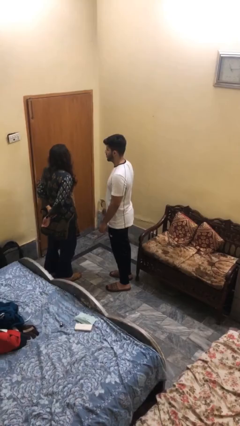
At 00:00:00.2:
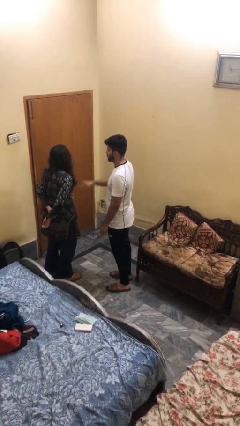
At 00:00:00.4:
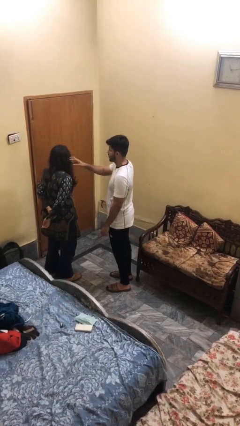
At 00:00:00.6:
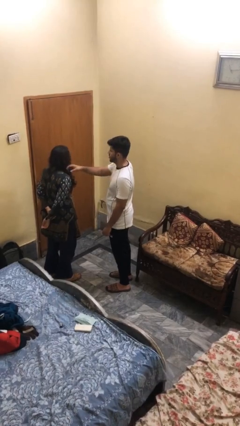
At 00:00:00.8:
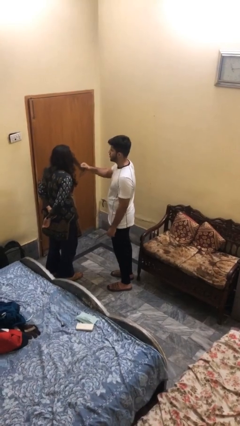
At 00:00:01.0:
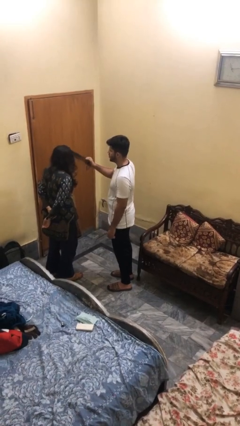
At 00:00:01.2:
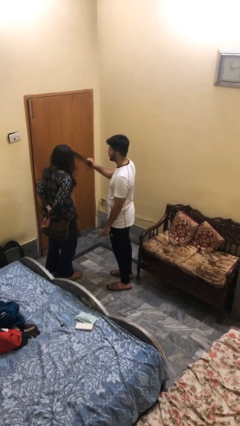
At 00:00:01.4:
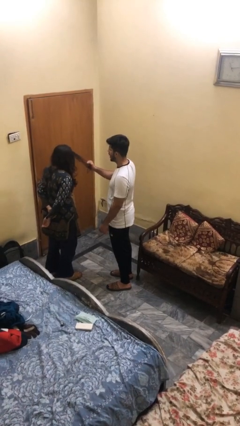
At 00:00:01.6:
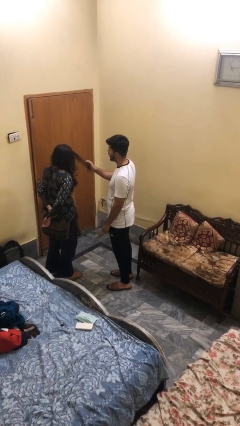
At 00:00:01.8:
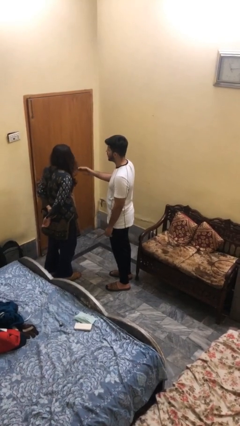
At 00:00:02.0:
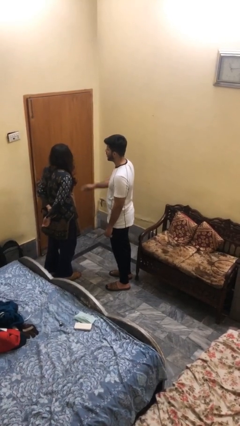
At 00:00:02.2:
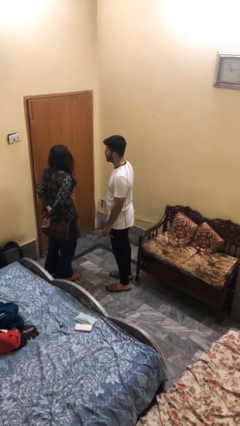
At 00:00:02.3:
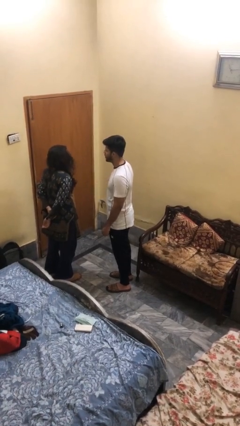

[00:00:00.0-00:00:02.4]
person grabs person by hair

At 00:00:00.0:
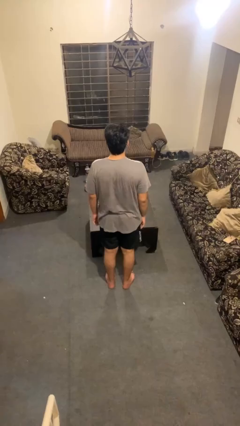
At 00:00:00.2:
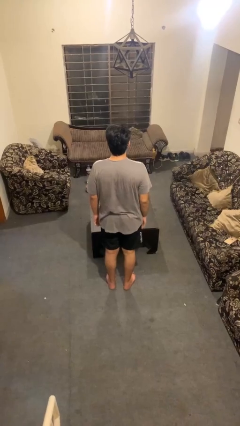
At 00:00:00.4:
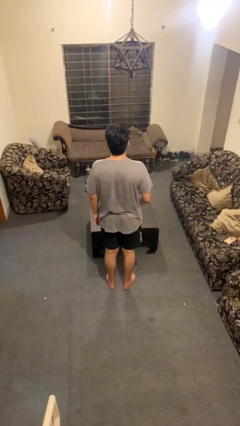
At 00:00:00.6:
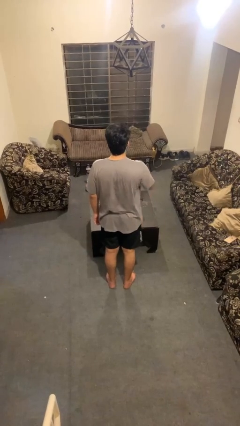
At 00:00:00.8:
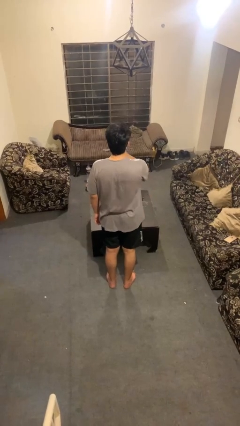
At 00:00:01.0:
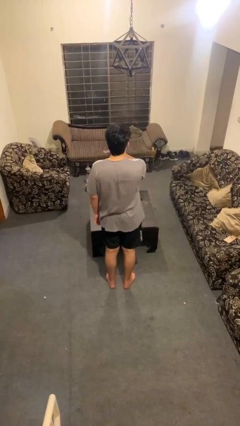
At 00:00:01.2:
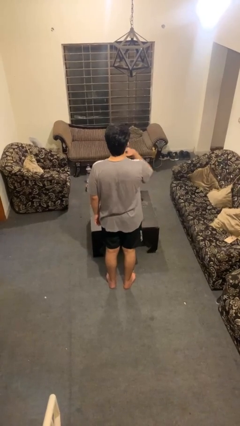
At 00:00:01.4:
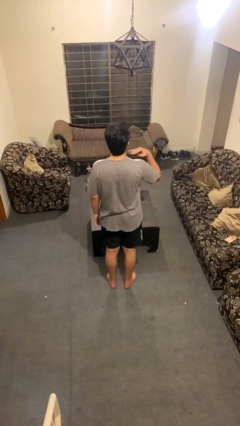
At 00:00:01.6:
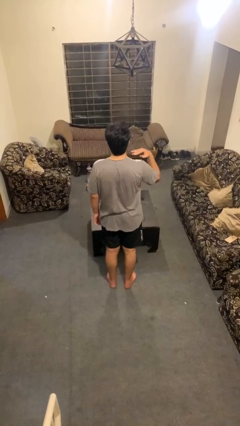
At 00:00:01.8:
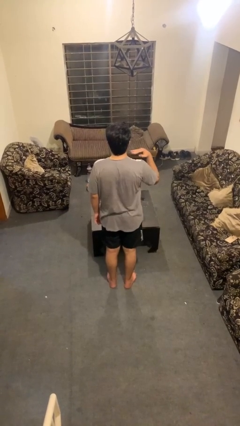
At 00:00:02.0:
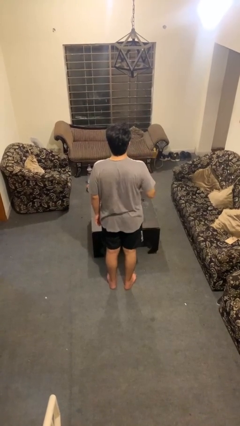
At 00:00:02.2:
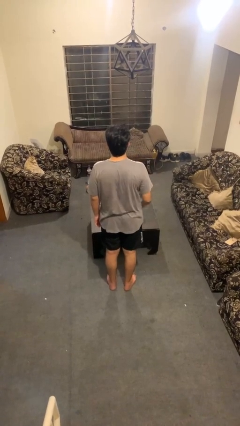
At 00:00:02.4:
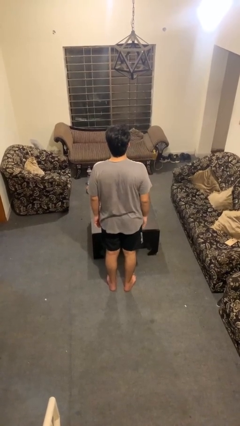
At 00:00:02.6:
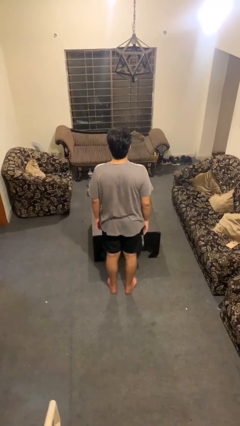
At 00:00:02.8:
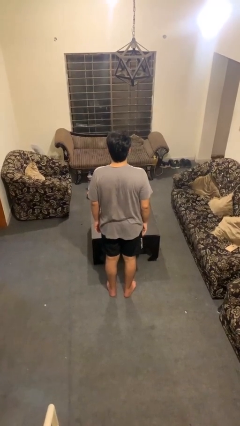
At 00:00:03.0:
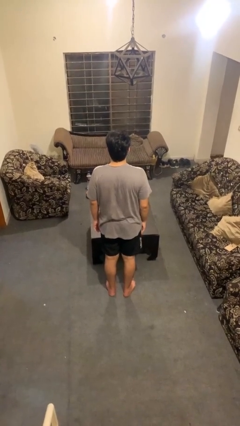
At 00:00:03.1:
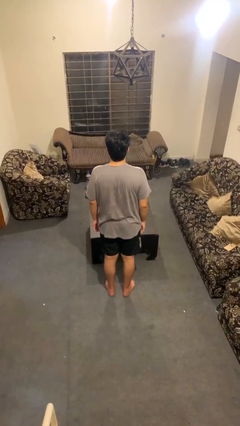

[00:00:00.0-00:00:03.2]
person gestures cut

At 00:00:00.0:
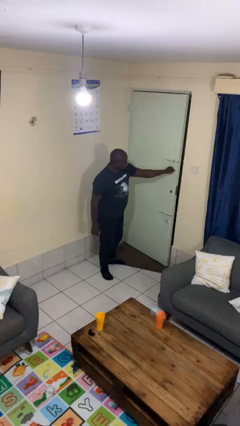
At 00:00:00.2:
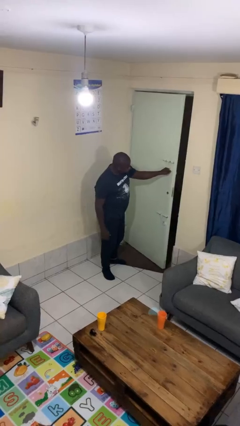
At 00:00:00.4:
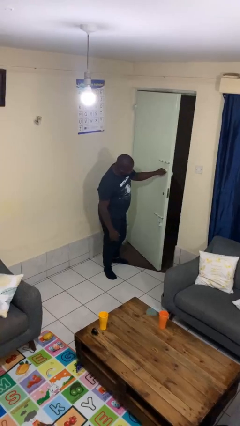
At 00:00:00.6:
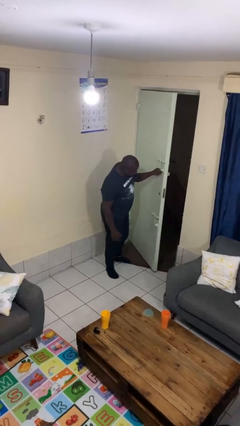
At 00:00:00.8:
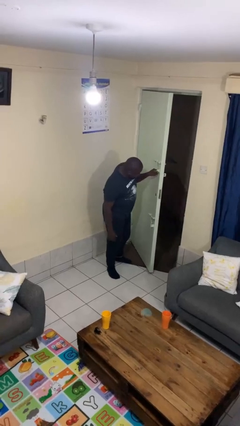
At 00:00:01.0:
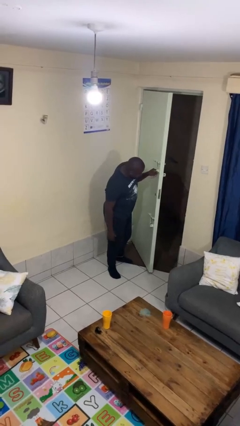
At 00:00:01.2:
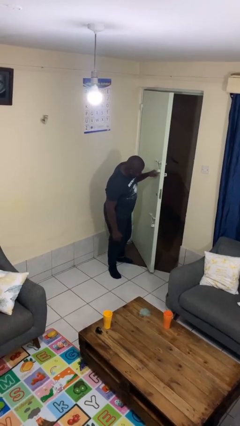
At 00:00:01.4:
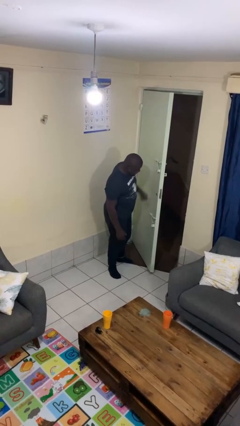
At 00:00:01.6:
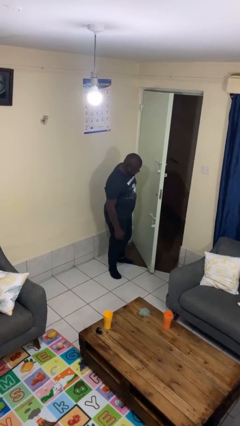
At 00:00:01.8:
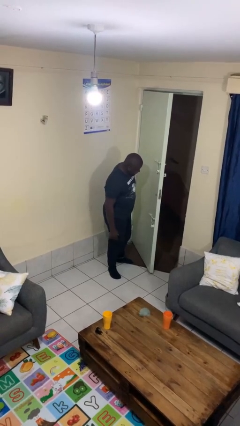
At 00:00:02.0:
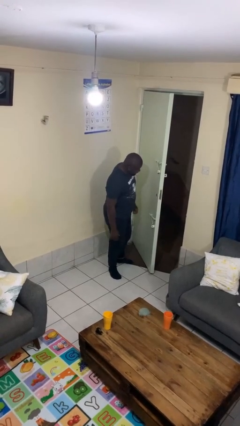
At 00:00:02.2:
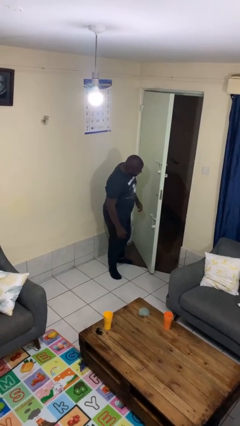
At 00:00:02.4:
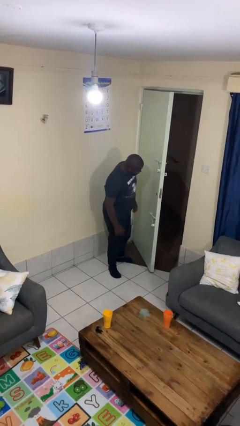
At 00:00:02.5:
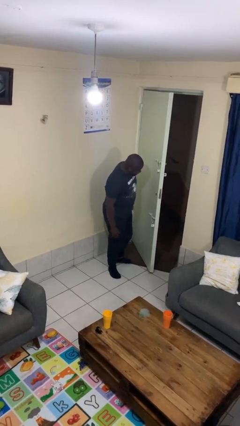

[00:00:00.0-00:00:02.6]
person opens facility door

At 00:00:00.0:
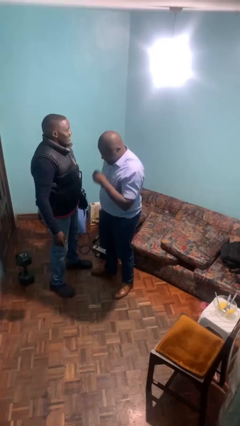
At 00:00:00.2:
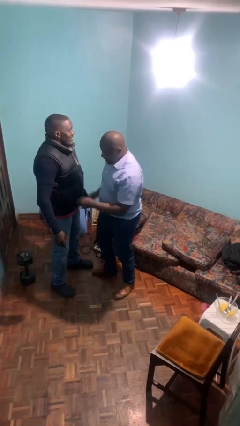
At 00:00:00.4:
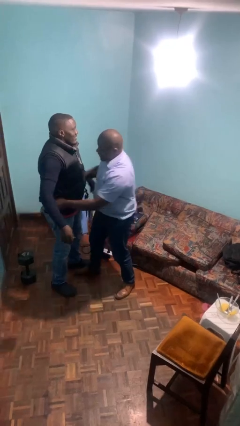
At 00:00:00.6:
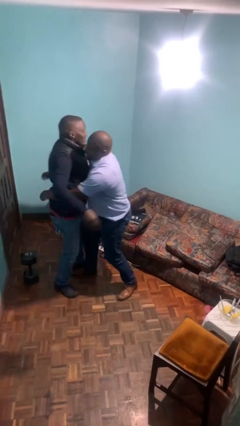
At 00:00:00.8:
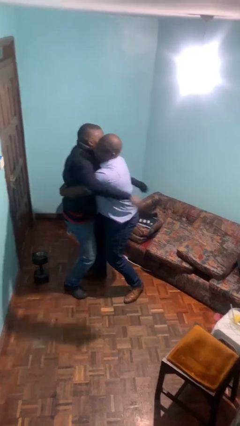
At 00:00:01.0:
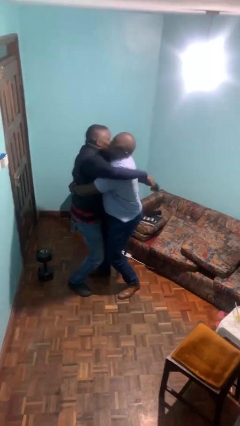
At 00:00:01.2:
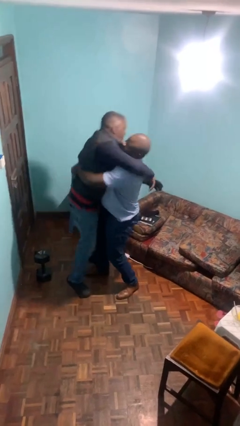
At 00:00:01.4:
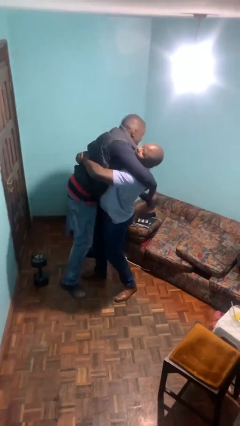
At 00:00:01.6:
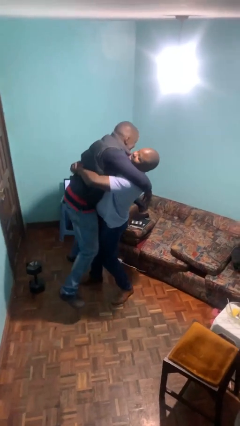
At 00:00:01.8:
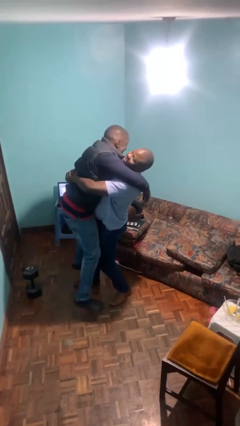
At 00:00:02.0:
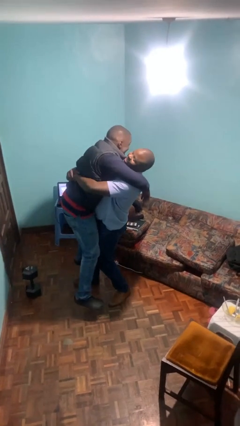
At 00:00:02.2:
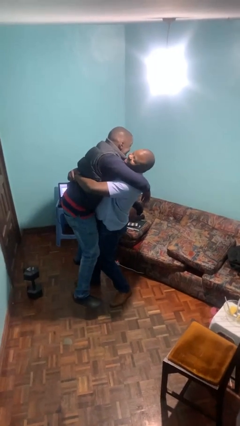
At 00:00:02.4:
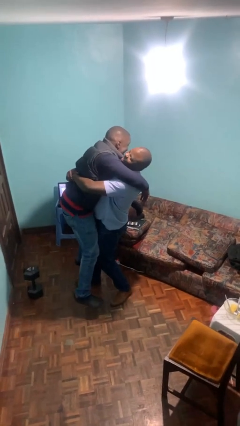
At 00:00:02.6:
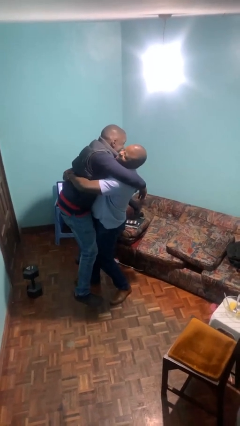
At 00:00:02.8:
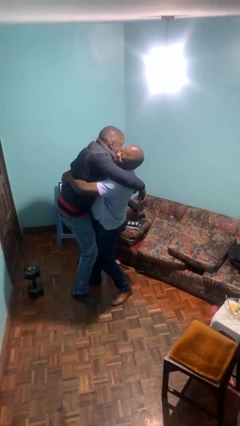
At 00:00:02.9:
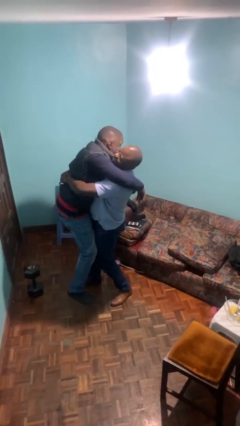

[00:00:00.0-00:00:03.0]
person picks up person

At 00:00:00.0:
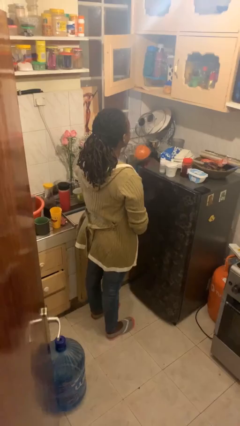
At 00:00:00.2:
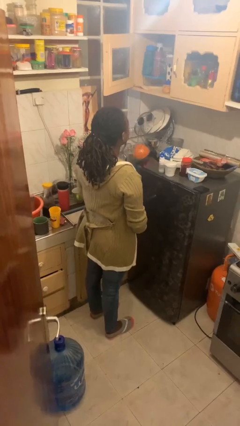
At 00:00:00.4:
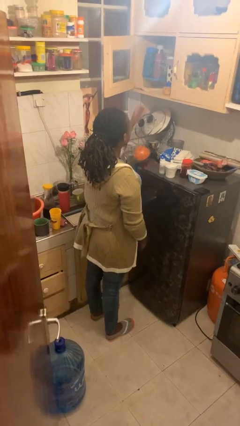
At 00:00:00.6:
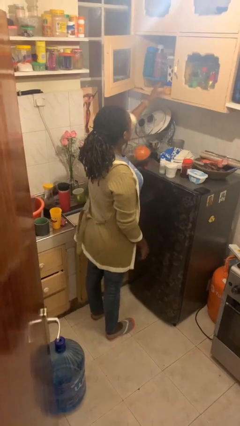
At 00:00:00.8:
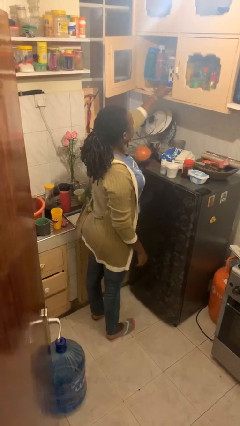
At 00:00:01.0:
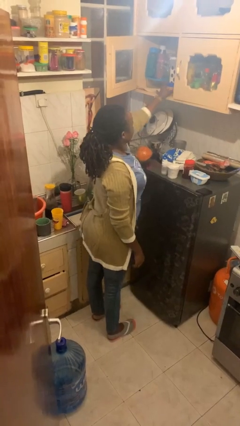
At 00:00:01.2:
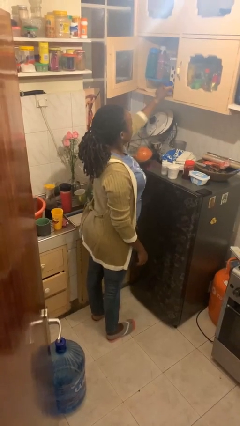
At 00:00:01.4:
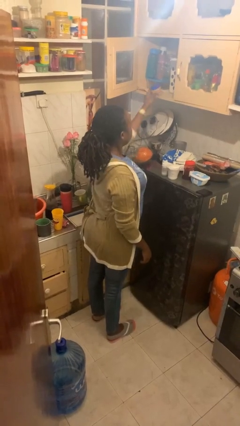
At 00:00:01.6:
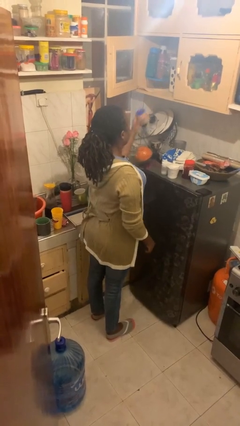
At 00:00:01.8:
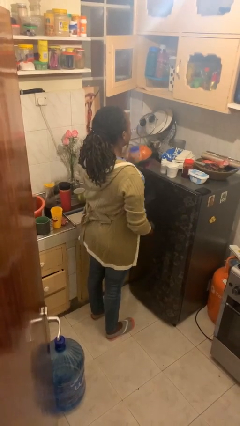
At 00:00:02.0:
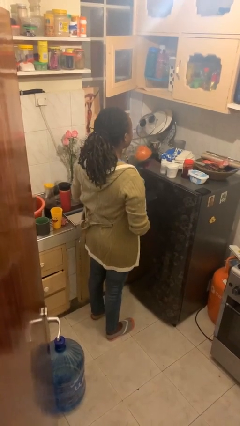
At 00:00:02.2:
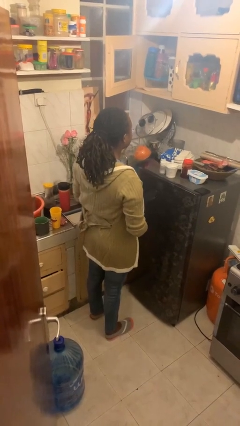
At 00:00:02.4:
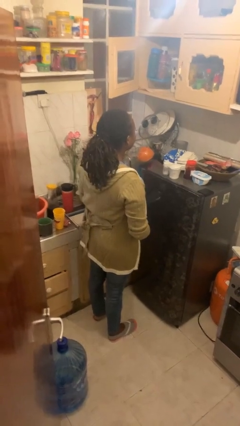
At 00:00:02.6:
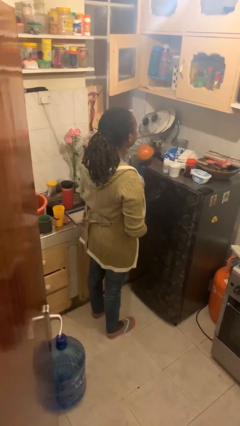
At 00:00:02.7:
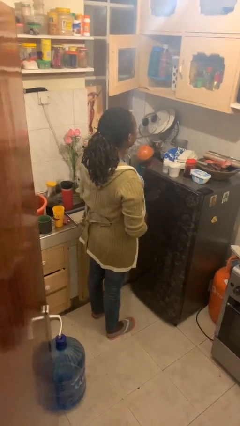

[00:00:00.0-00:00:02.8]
person picks up object from countertop

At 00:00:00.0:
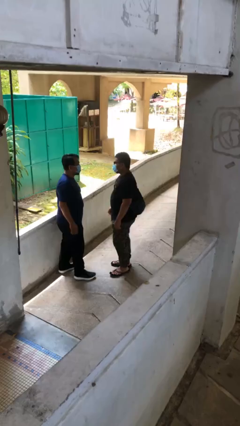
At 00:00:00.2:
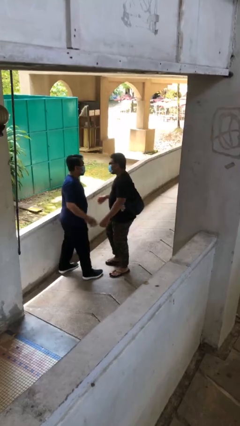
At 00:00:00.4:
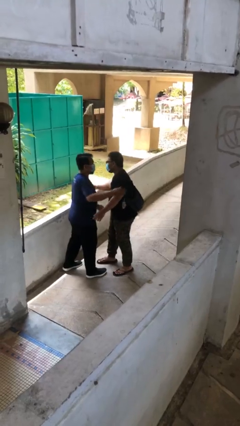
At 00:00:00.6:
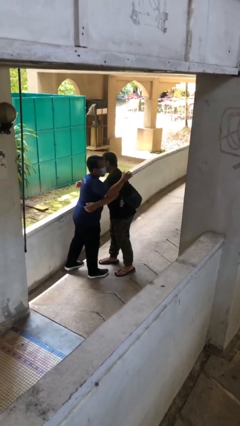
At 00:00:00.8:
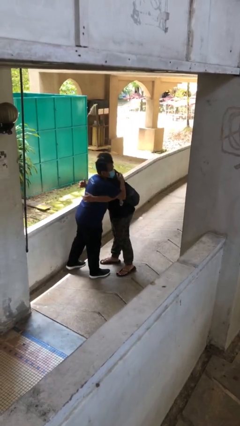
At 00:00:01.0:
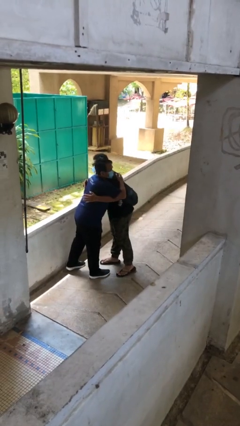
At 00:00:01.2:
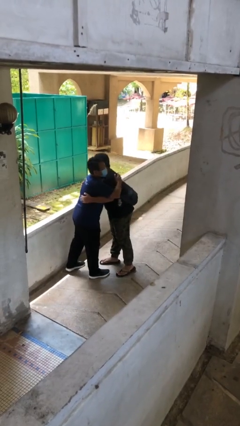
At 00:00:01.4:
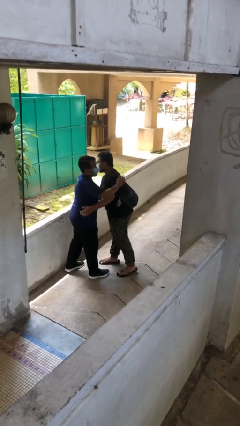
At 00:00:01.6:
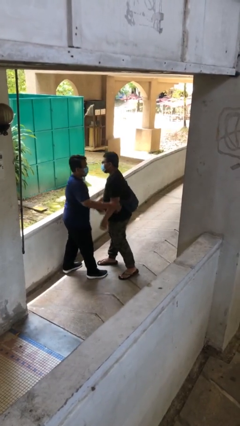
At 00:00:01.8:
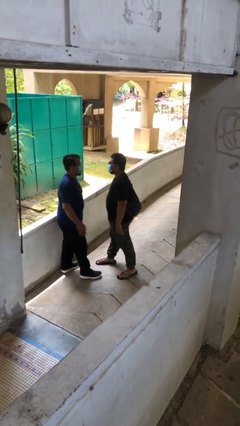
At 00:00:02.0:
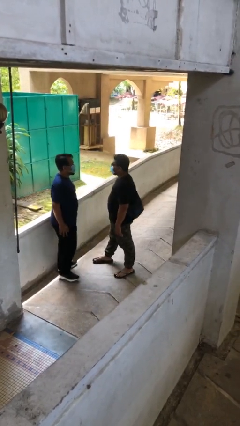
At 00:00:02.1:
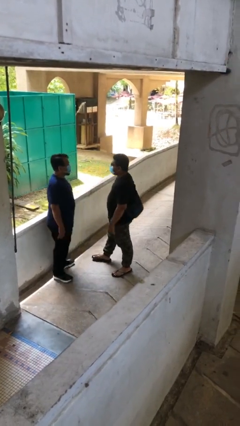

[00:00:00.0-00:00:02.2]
person embraces person

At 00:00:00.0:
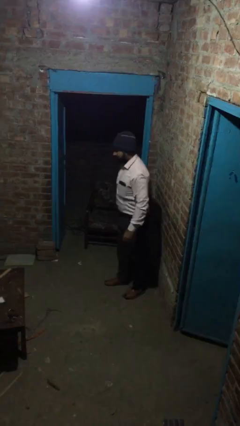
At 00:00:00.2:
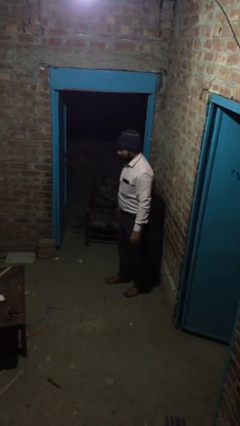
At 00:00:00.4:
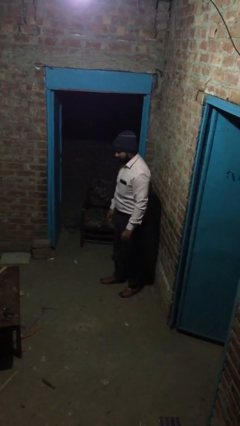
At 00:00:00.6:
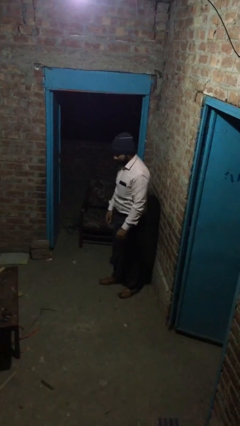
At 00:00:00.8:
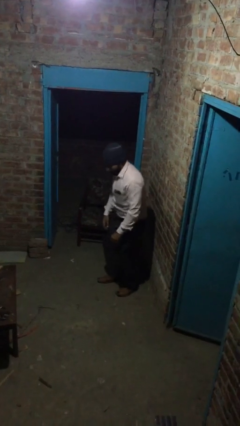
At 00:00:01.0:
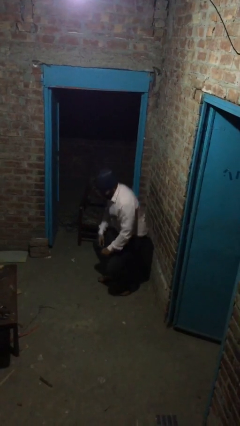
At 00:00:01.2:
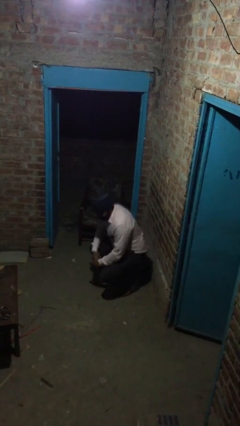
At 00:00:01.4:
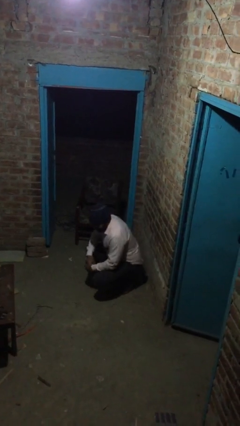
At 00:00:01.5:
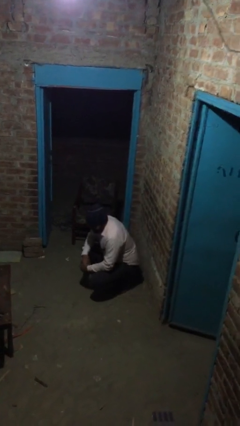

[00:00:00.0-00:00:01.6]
person sits down
